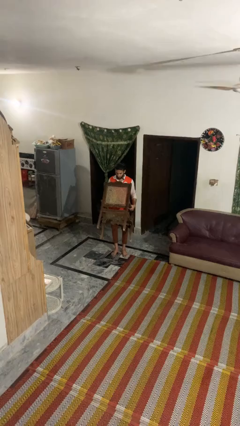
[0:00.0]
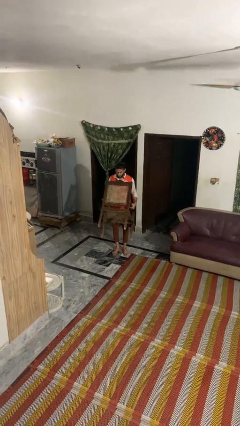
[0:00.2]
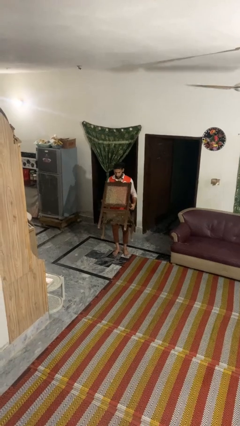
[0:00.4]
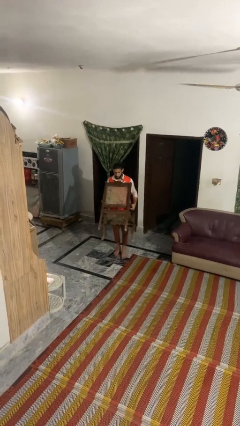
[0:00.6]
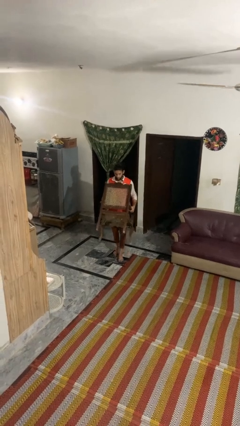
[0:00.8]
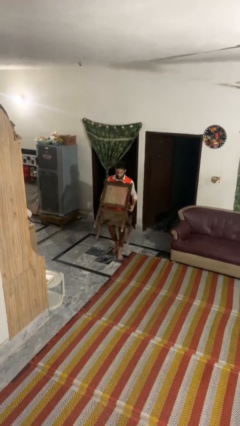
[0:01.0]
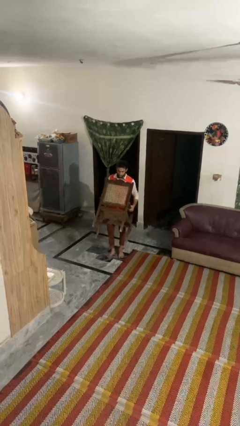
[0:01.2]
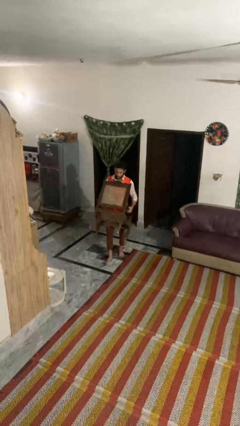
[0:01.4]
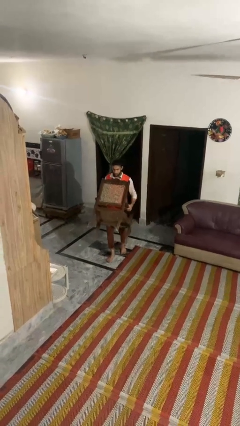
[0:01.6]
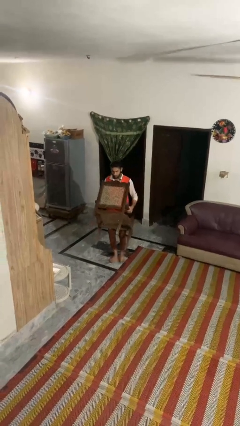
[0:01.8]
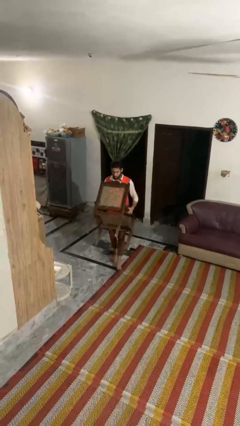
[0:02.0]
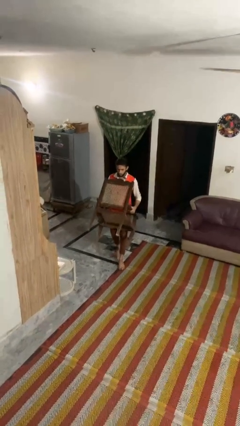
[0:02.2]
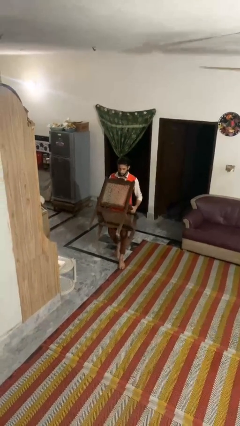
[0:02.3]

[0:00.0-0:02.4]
person carries furniture

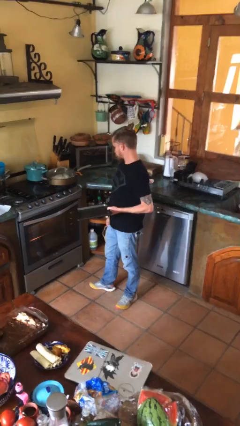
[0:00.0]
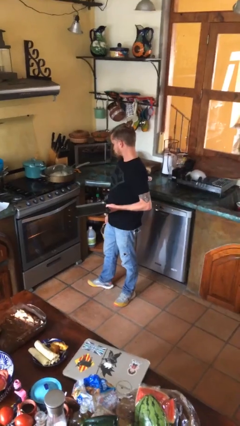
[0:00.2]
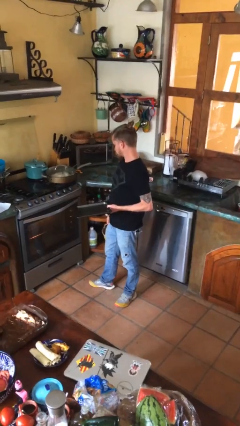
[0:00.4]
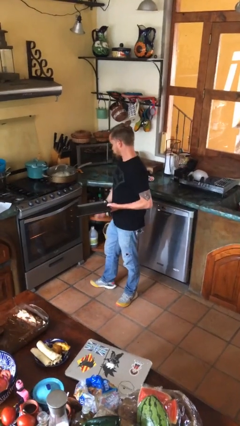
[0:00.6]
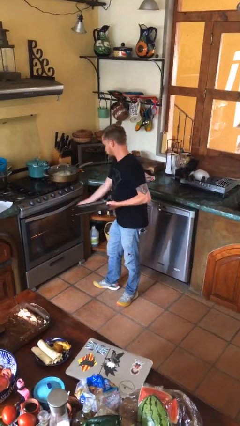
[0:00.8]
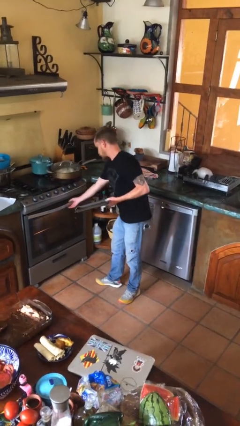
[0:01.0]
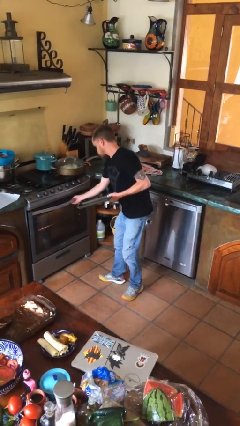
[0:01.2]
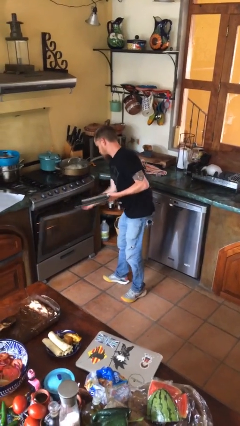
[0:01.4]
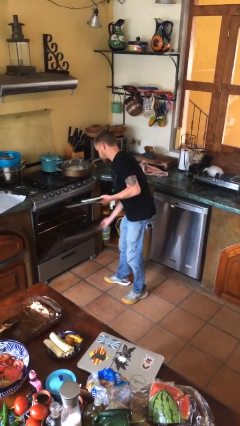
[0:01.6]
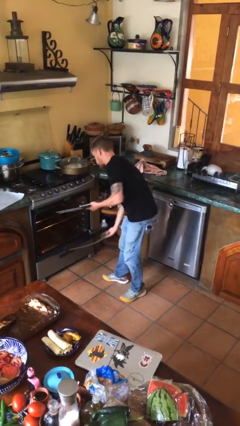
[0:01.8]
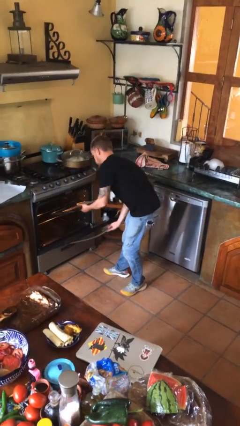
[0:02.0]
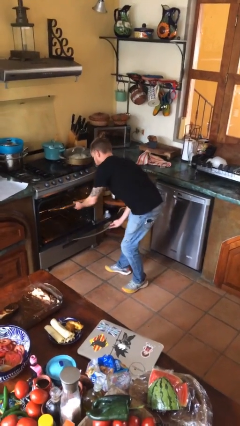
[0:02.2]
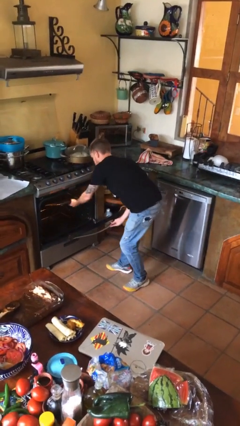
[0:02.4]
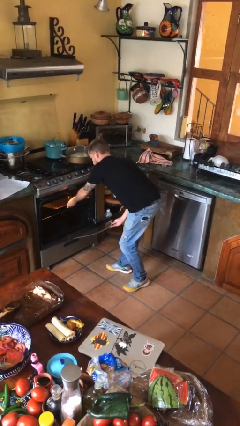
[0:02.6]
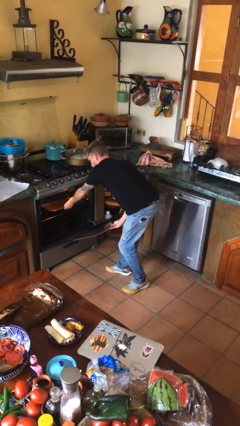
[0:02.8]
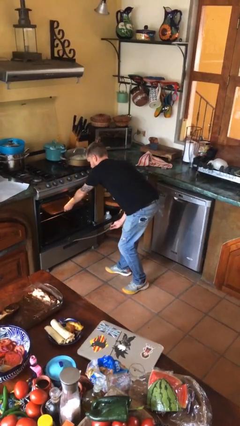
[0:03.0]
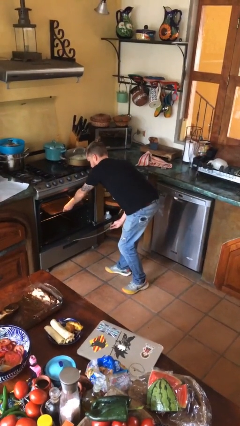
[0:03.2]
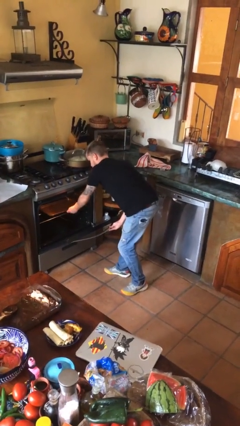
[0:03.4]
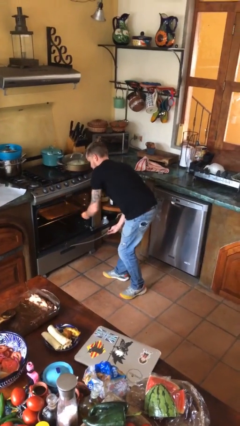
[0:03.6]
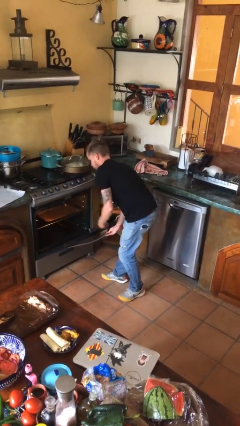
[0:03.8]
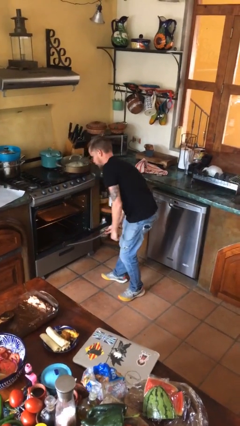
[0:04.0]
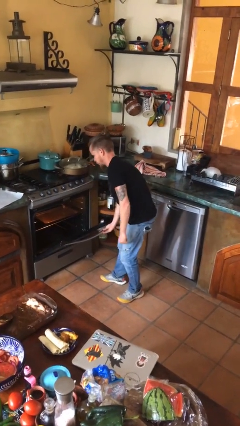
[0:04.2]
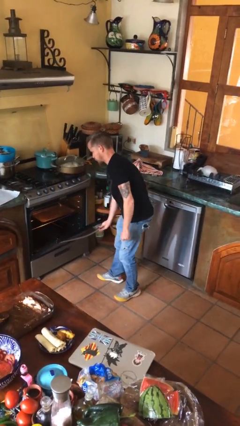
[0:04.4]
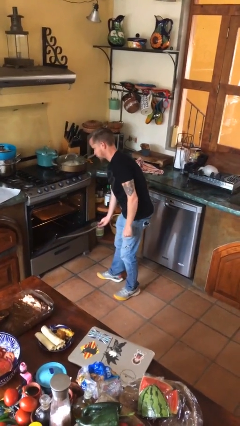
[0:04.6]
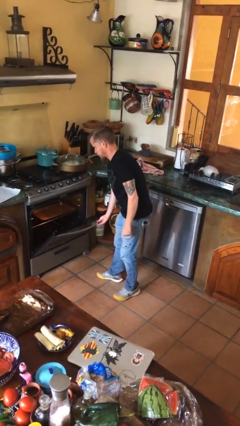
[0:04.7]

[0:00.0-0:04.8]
person puts object into oven

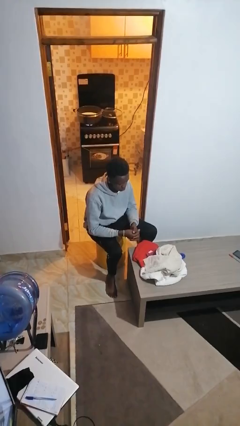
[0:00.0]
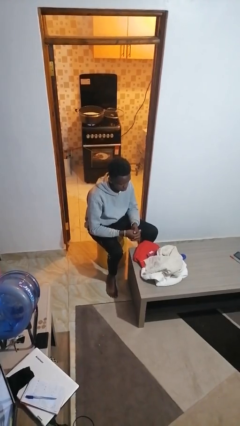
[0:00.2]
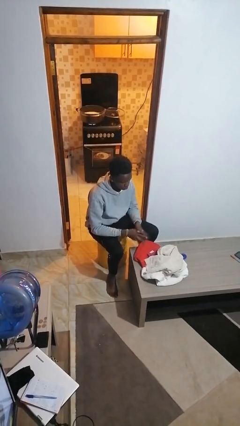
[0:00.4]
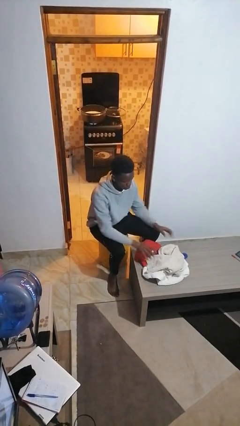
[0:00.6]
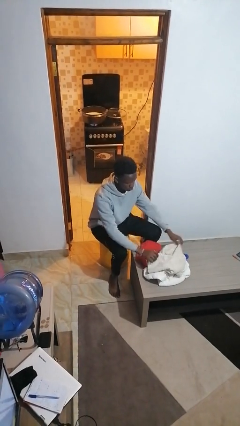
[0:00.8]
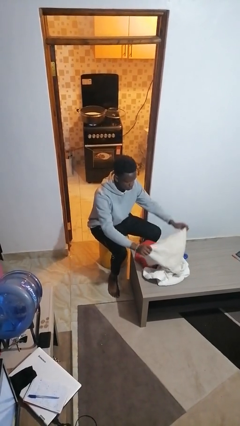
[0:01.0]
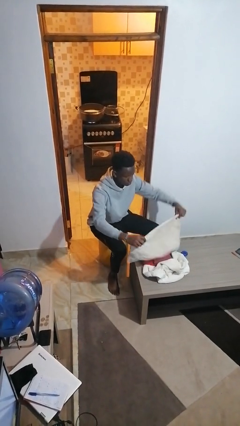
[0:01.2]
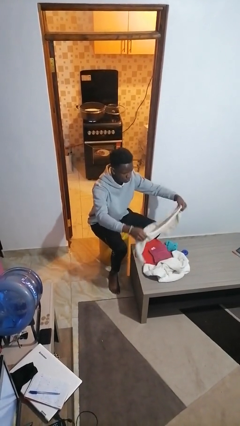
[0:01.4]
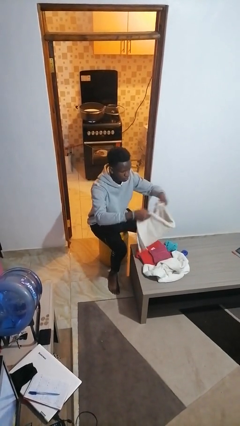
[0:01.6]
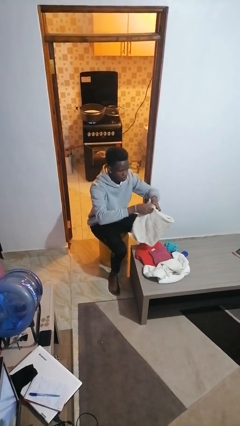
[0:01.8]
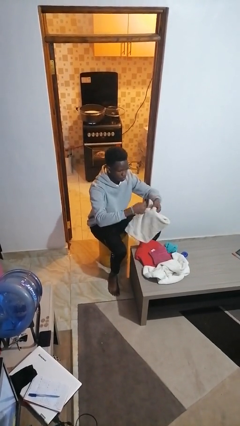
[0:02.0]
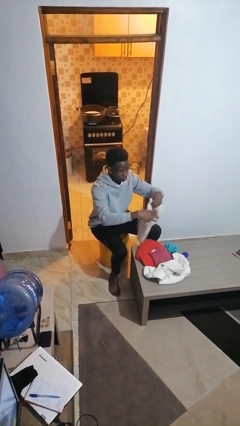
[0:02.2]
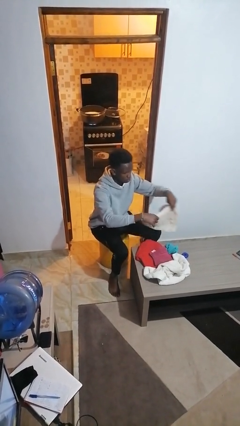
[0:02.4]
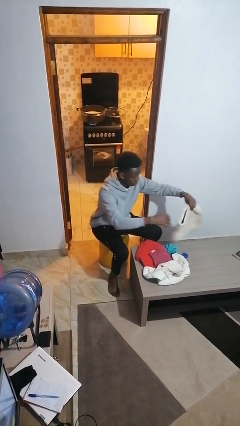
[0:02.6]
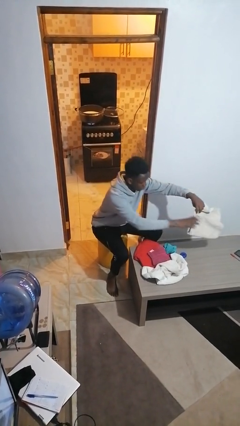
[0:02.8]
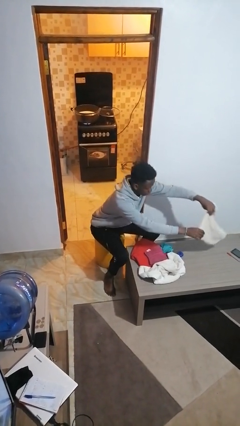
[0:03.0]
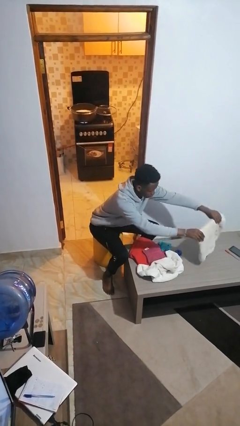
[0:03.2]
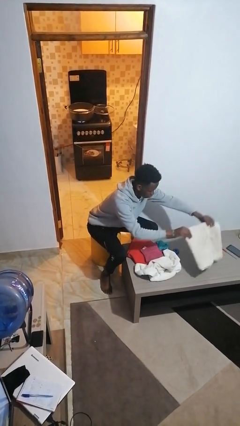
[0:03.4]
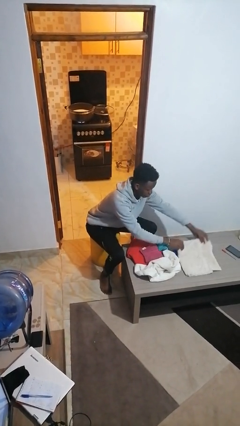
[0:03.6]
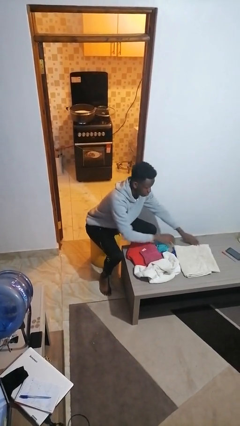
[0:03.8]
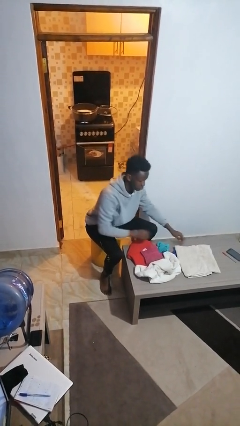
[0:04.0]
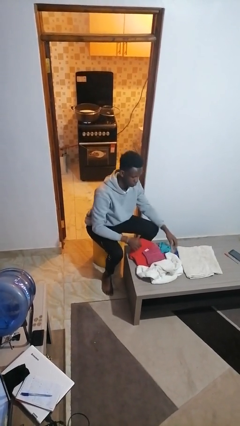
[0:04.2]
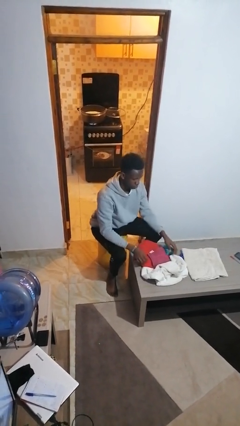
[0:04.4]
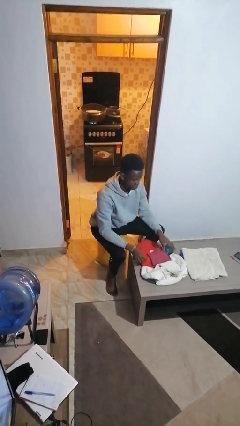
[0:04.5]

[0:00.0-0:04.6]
person folds towel

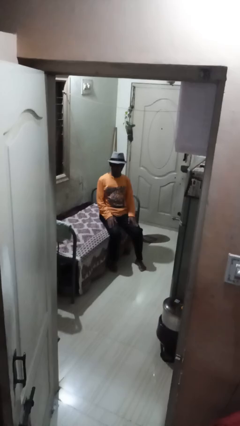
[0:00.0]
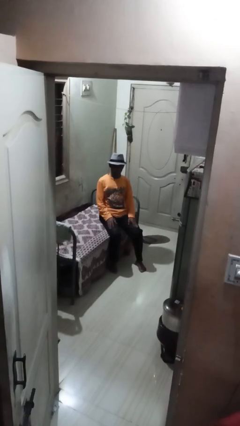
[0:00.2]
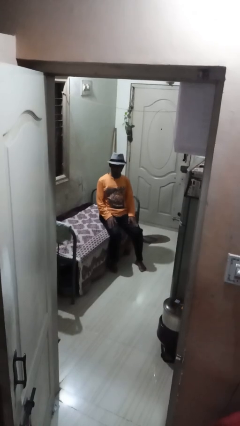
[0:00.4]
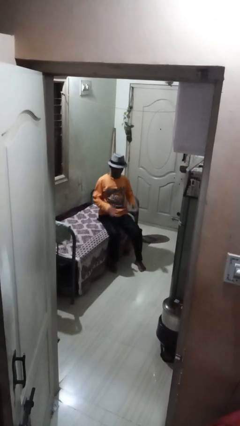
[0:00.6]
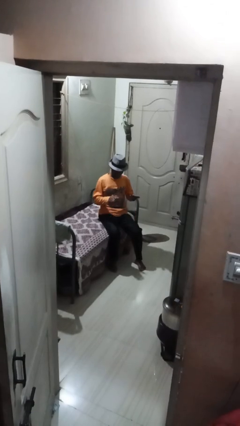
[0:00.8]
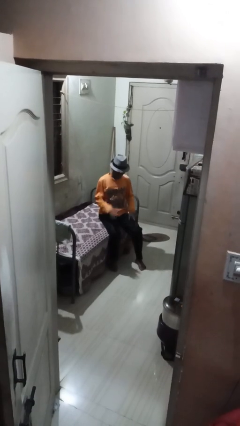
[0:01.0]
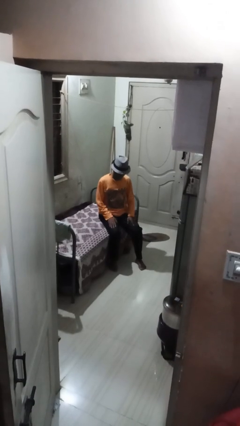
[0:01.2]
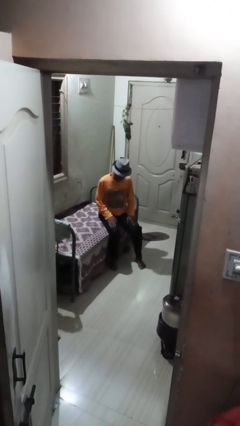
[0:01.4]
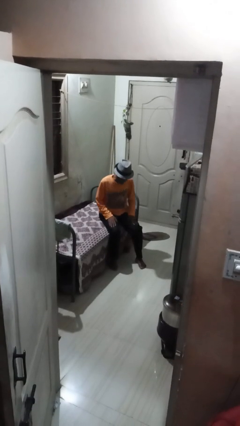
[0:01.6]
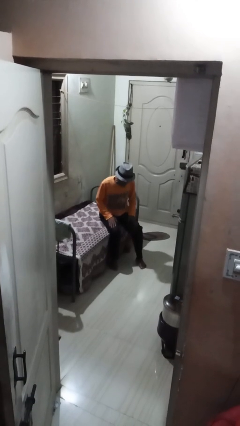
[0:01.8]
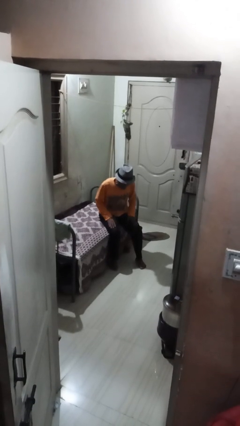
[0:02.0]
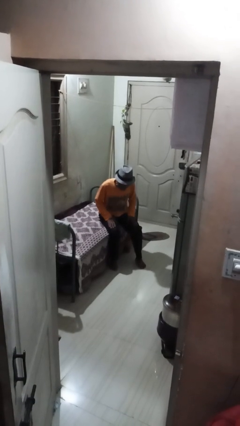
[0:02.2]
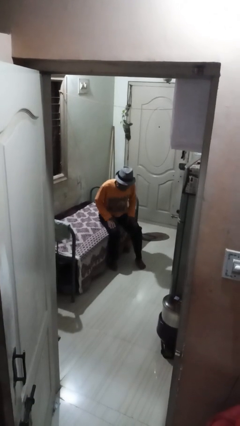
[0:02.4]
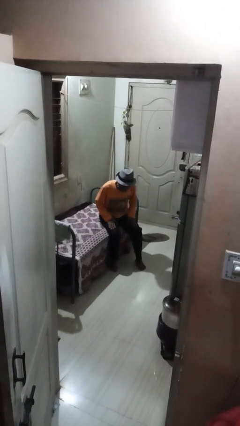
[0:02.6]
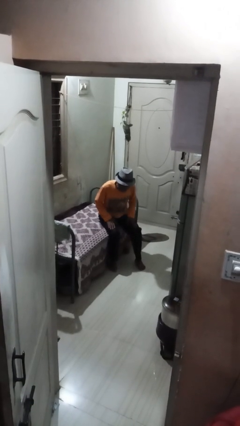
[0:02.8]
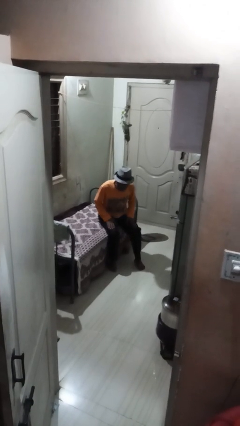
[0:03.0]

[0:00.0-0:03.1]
person slaps hands on thighs

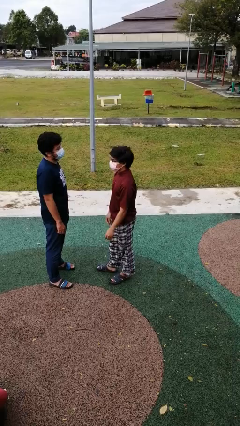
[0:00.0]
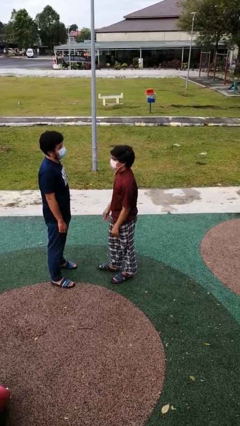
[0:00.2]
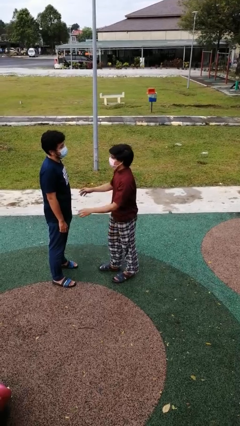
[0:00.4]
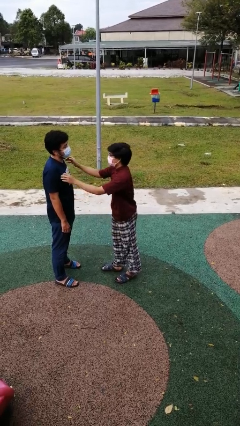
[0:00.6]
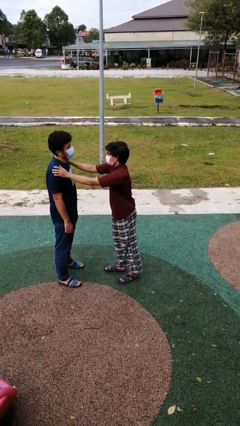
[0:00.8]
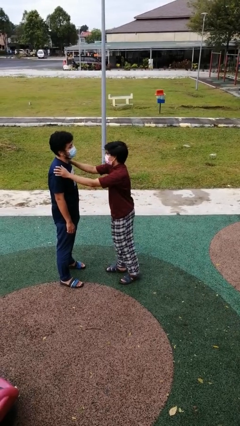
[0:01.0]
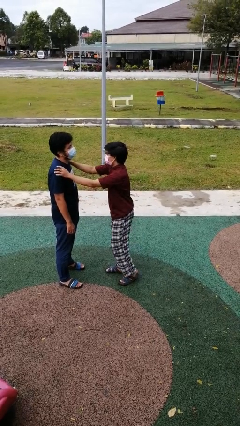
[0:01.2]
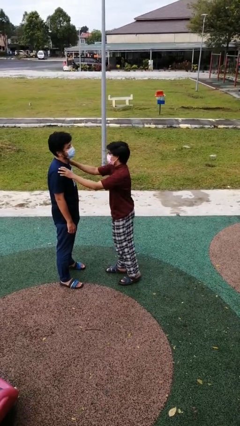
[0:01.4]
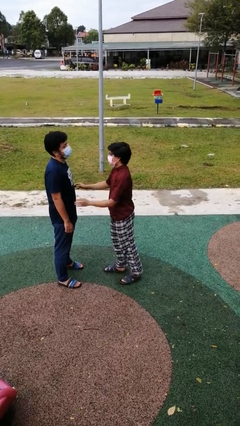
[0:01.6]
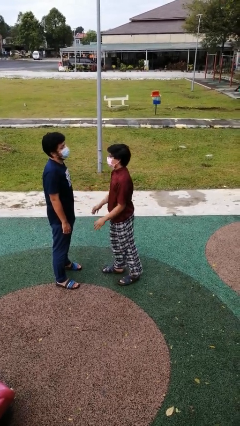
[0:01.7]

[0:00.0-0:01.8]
person pounds shoulders of person

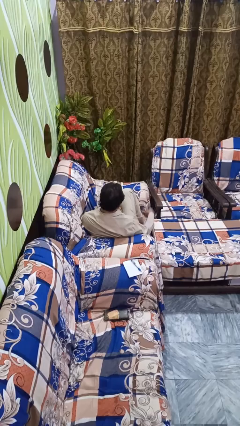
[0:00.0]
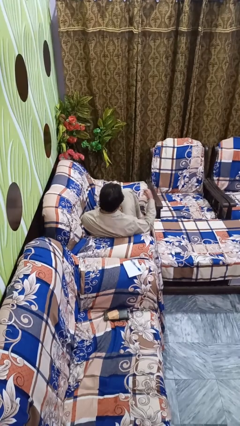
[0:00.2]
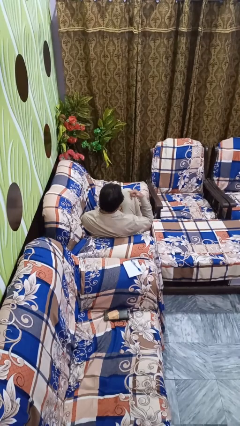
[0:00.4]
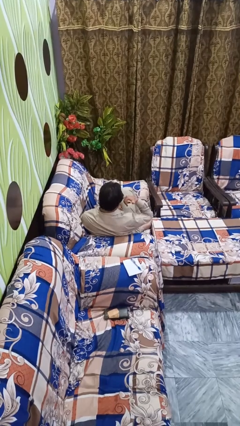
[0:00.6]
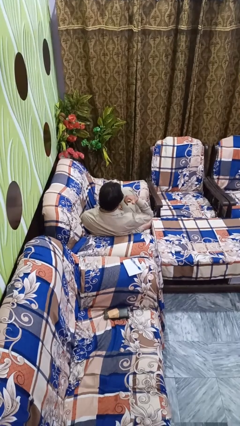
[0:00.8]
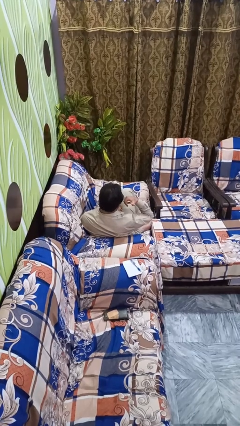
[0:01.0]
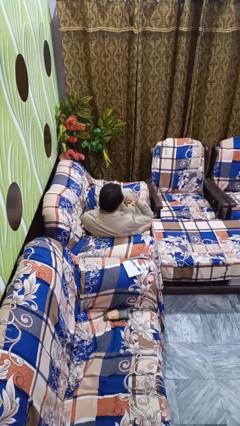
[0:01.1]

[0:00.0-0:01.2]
person gestures call me
